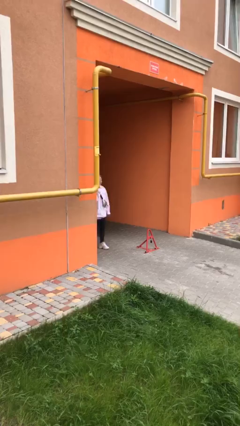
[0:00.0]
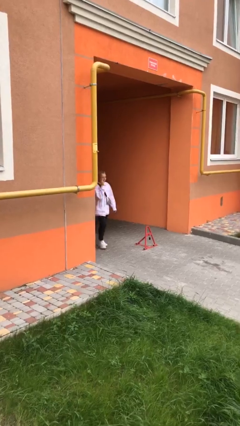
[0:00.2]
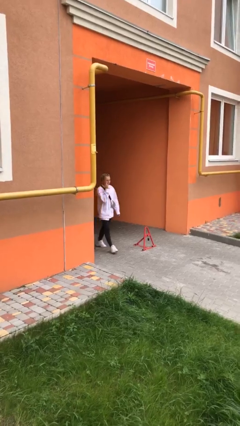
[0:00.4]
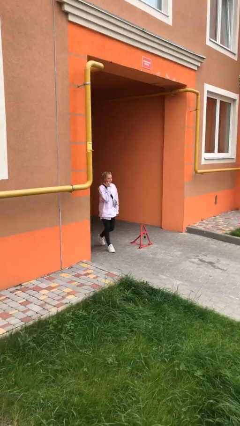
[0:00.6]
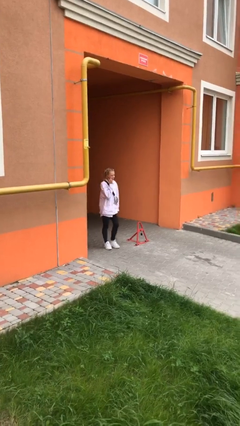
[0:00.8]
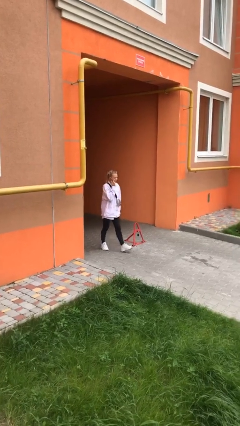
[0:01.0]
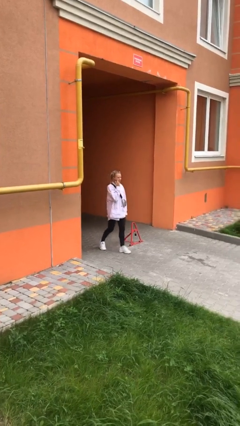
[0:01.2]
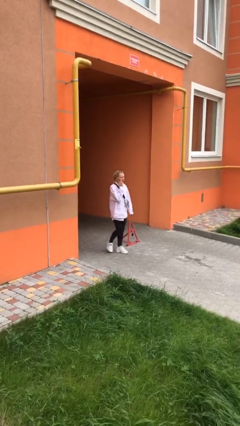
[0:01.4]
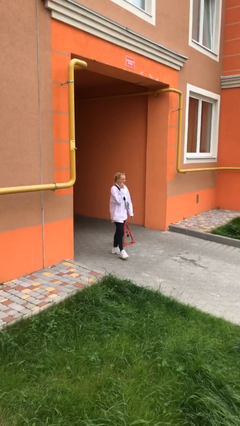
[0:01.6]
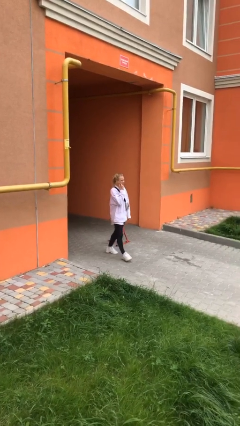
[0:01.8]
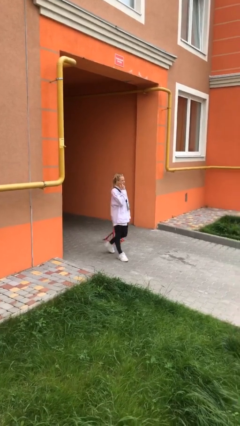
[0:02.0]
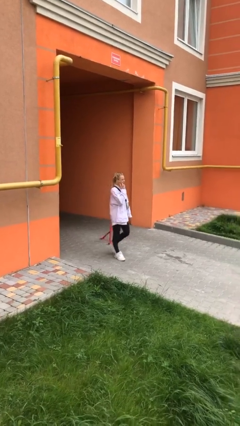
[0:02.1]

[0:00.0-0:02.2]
person enters scene through structure

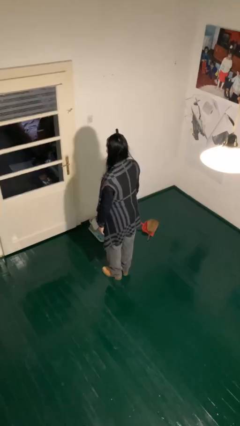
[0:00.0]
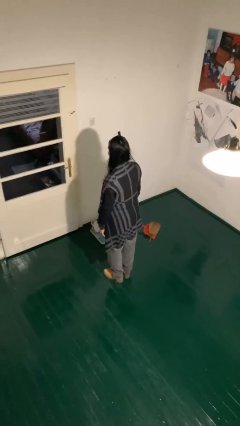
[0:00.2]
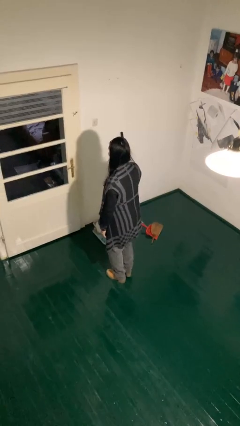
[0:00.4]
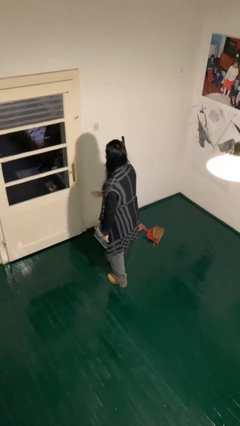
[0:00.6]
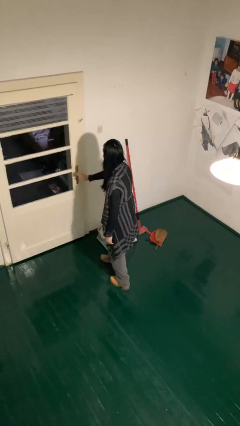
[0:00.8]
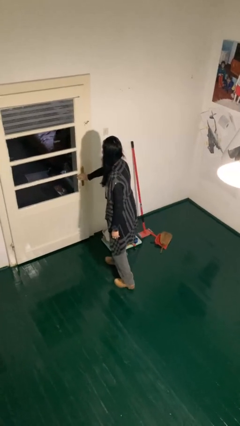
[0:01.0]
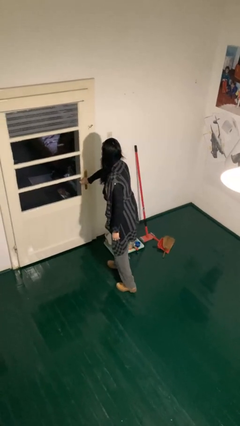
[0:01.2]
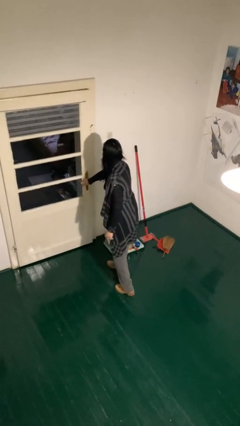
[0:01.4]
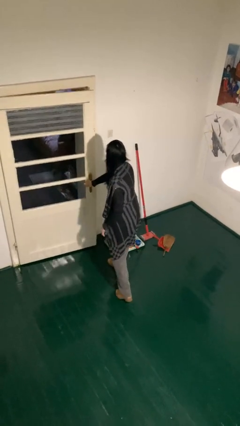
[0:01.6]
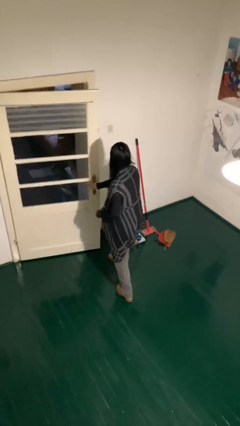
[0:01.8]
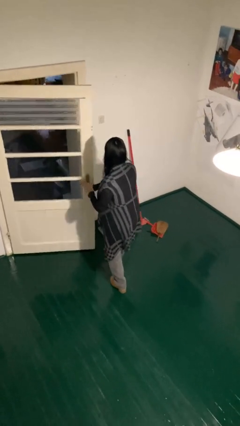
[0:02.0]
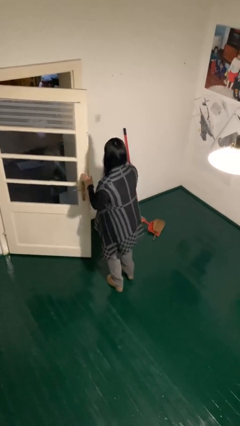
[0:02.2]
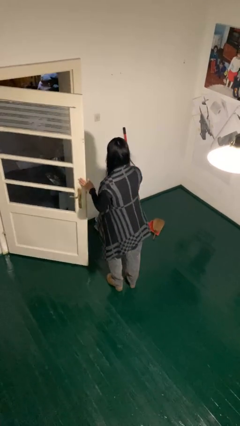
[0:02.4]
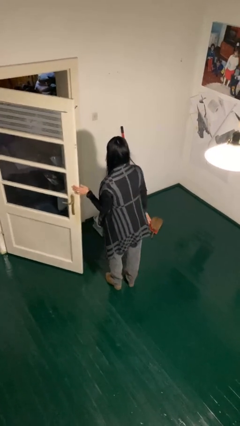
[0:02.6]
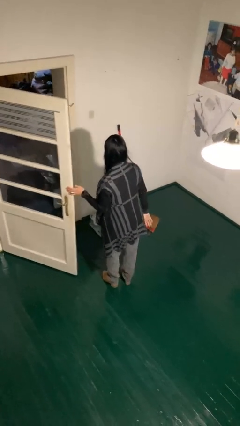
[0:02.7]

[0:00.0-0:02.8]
person opens facility door

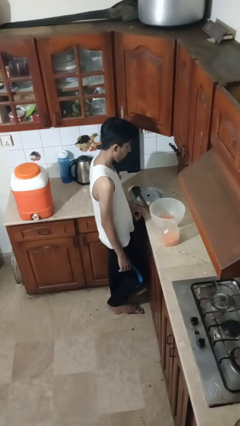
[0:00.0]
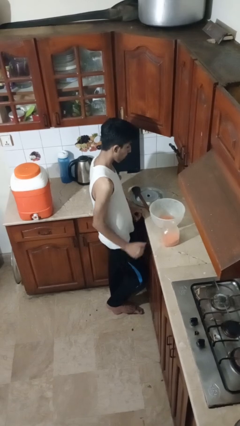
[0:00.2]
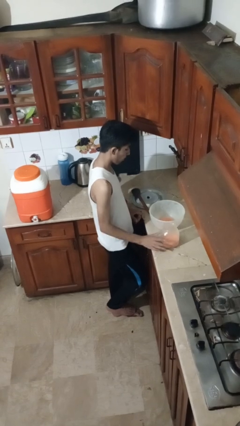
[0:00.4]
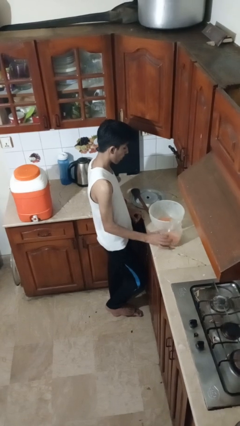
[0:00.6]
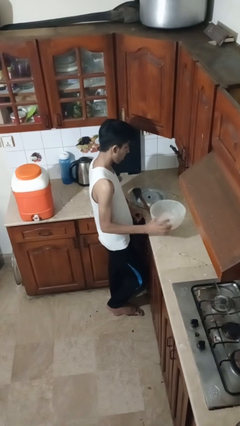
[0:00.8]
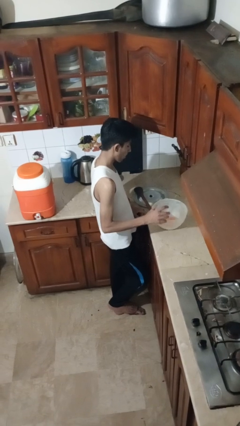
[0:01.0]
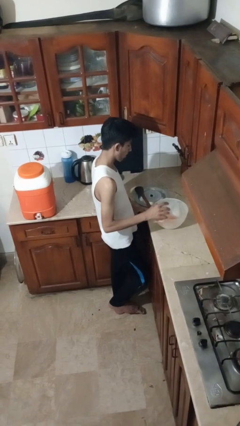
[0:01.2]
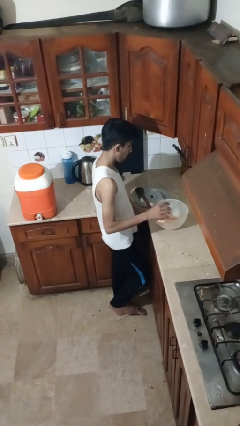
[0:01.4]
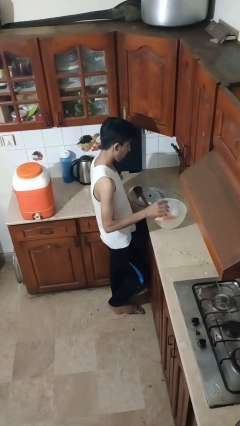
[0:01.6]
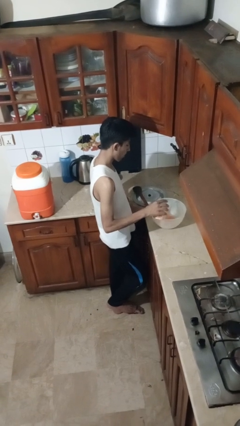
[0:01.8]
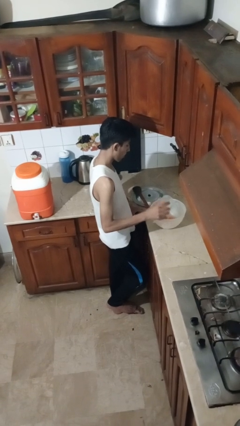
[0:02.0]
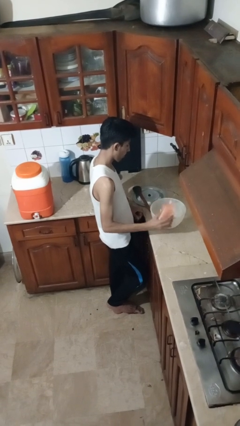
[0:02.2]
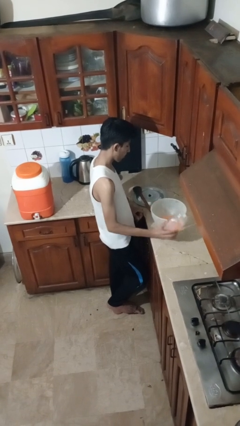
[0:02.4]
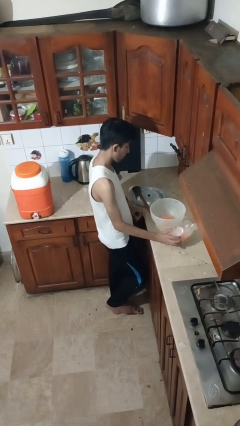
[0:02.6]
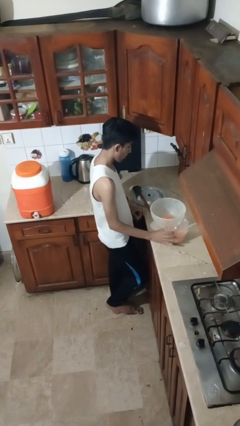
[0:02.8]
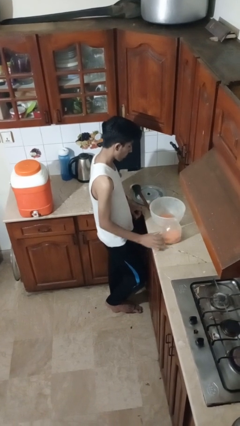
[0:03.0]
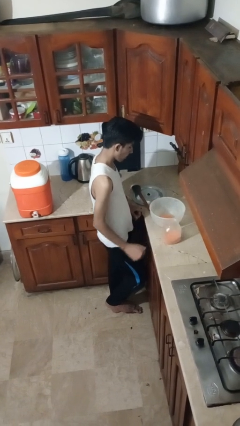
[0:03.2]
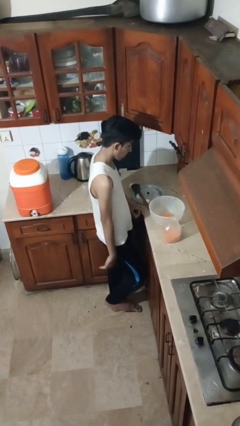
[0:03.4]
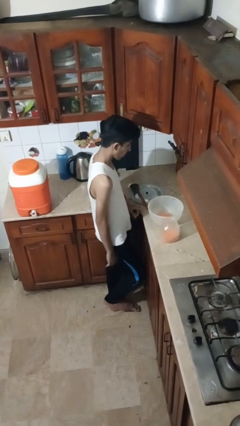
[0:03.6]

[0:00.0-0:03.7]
person pours into bowl

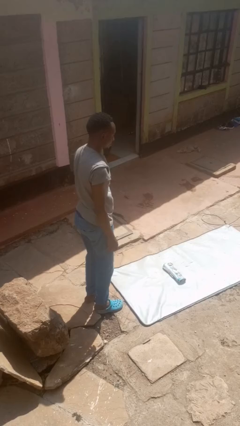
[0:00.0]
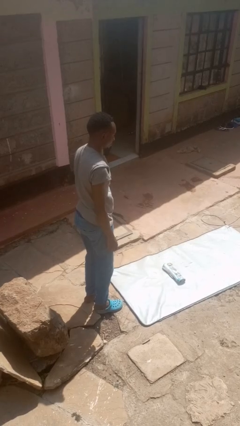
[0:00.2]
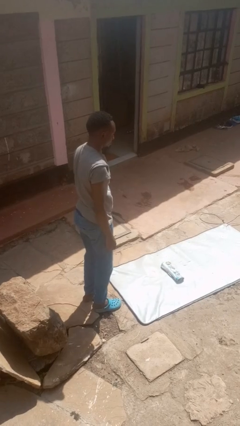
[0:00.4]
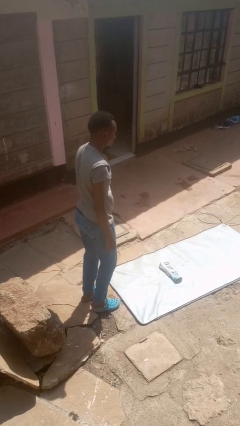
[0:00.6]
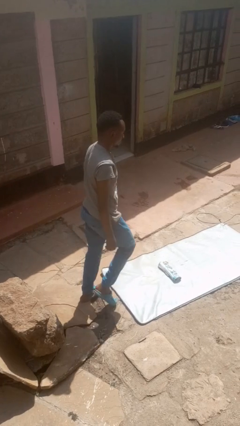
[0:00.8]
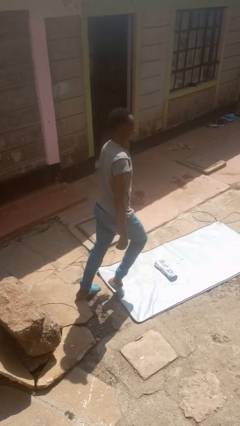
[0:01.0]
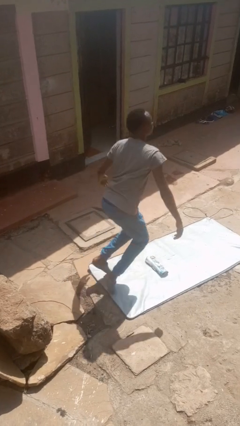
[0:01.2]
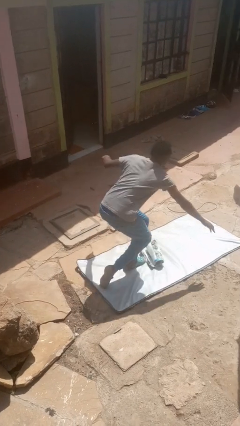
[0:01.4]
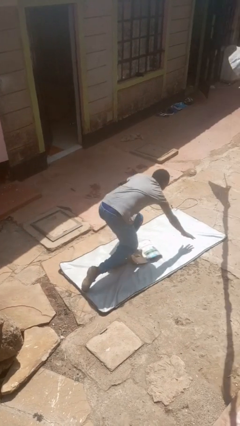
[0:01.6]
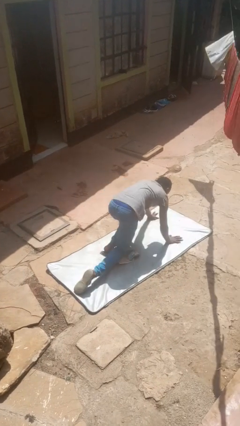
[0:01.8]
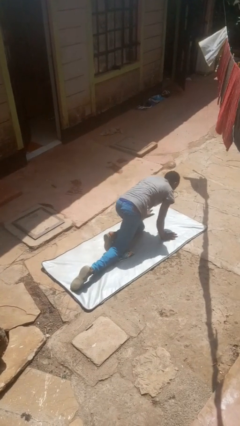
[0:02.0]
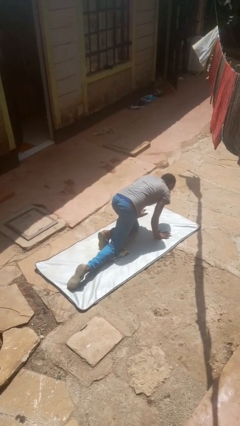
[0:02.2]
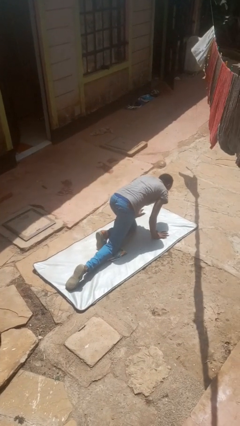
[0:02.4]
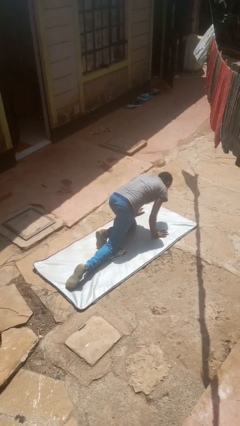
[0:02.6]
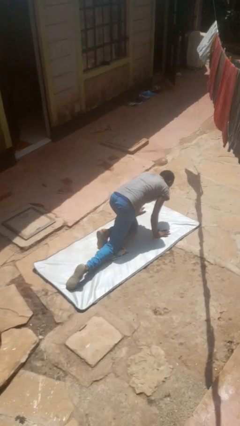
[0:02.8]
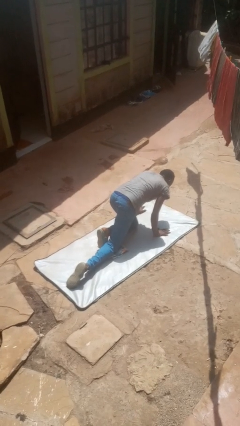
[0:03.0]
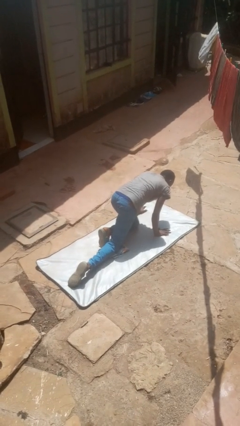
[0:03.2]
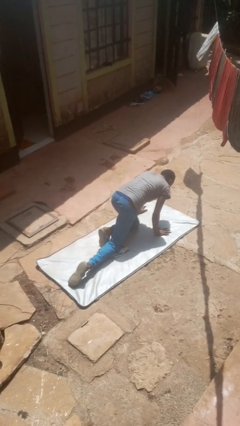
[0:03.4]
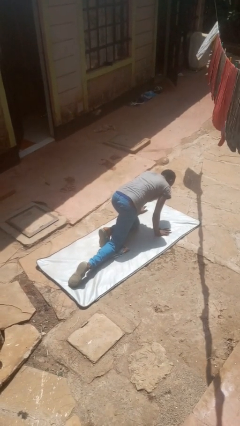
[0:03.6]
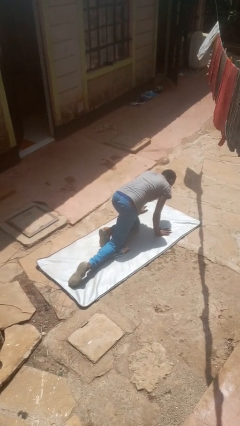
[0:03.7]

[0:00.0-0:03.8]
person trips on object on floor

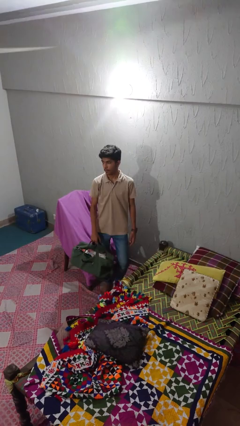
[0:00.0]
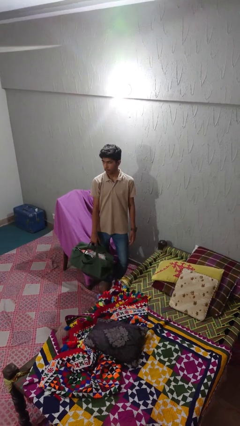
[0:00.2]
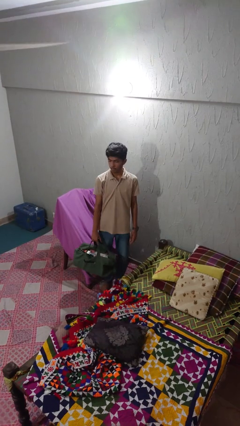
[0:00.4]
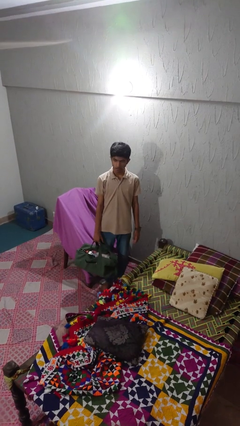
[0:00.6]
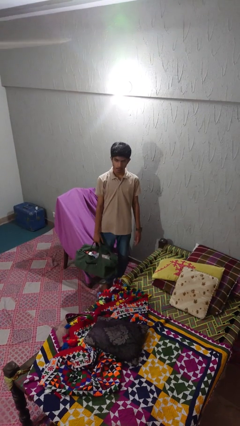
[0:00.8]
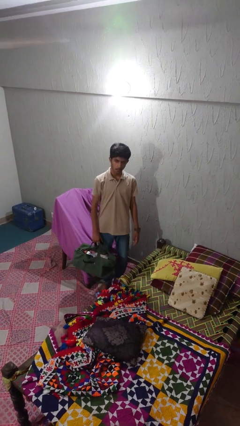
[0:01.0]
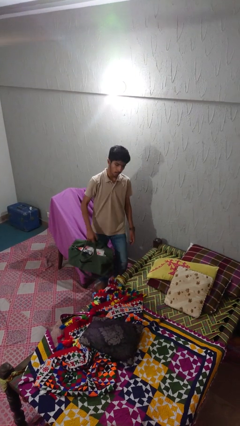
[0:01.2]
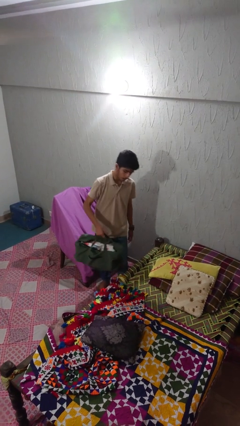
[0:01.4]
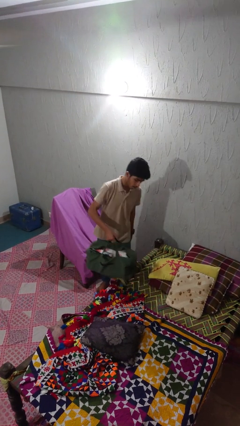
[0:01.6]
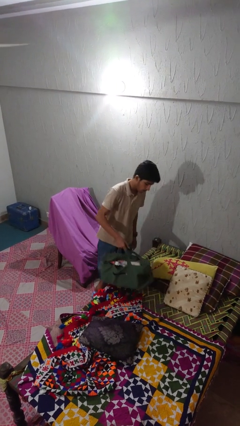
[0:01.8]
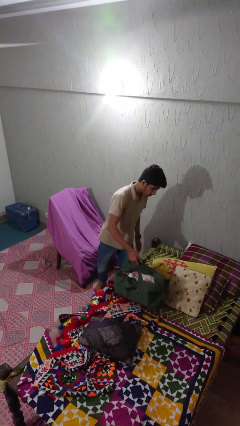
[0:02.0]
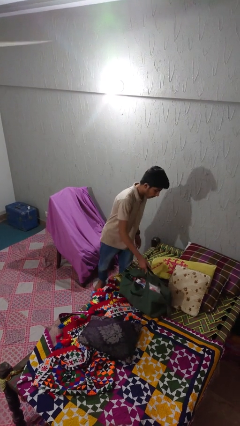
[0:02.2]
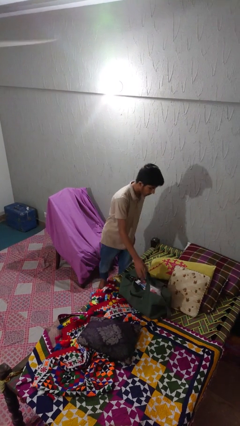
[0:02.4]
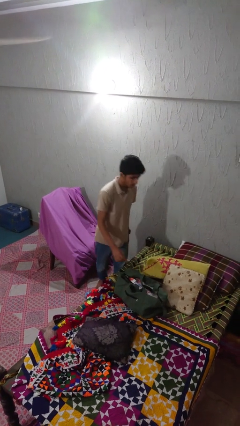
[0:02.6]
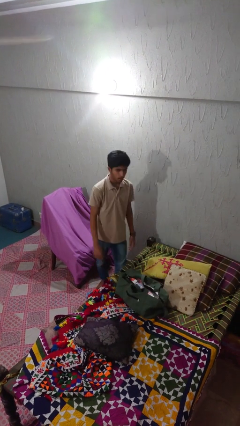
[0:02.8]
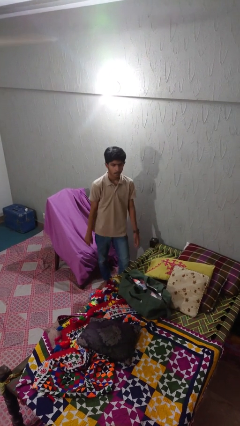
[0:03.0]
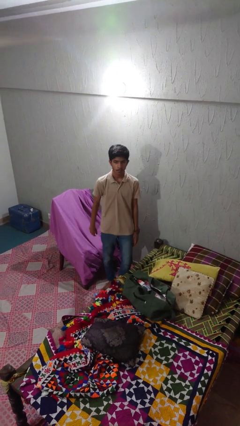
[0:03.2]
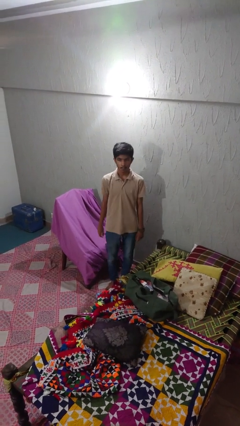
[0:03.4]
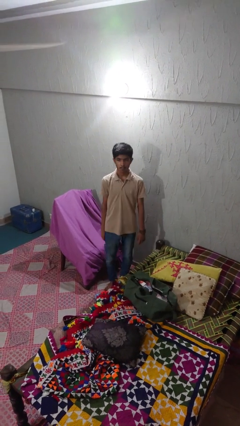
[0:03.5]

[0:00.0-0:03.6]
person puts down object on bed

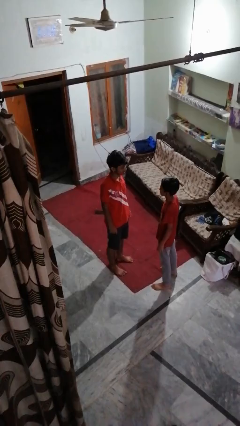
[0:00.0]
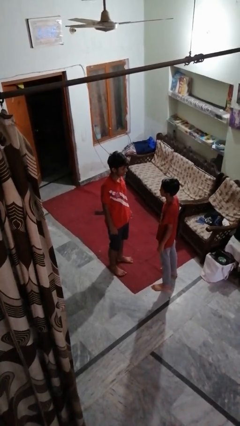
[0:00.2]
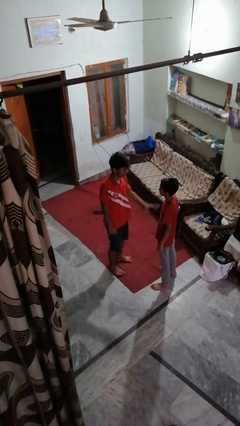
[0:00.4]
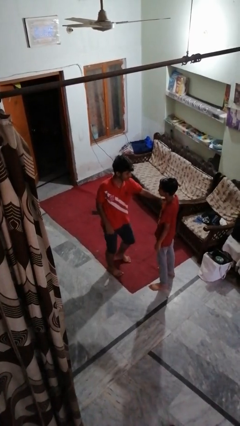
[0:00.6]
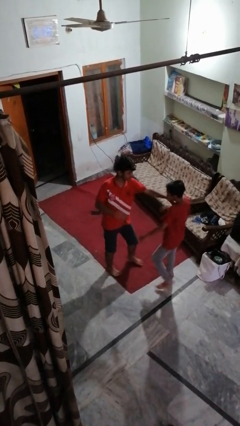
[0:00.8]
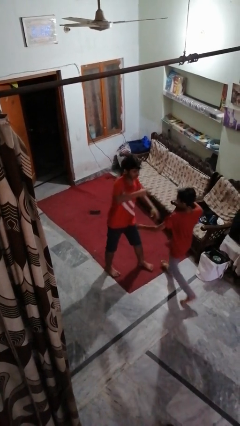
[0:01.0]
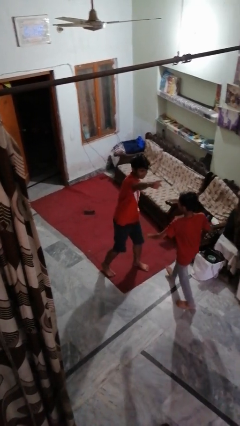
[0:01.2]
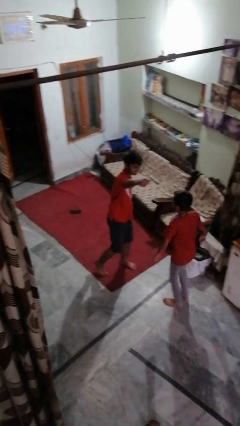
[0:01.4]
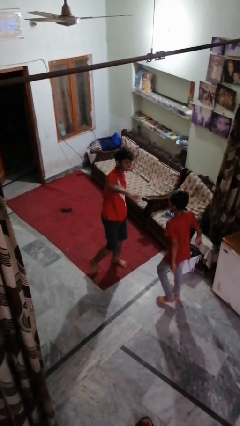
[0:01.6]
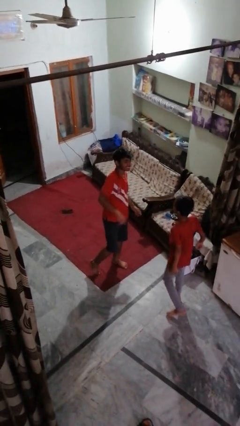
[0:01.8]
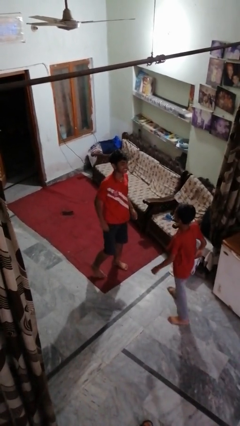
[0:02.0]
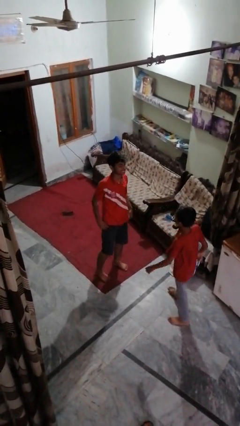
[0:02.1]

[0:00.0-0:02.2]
person shoves person
